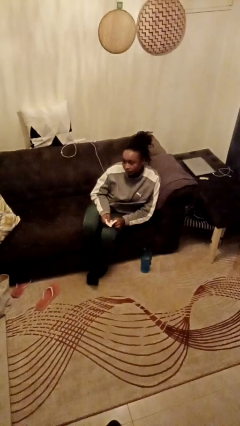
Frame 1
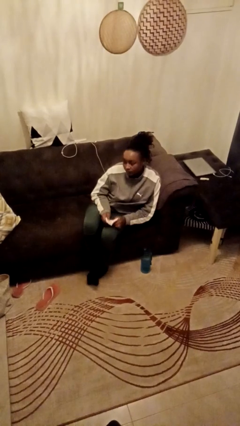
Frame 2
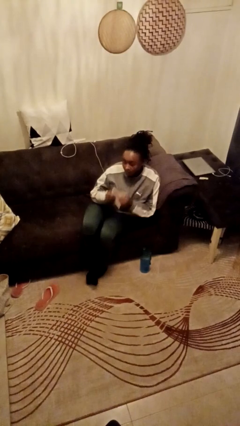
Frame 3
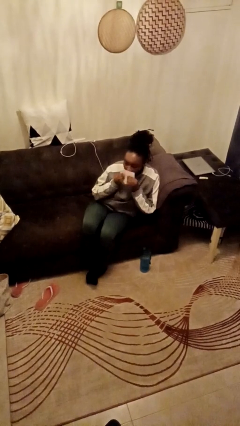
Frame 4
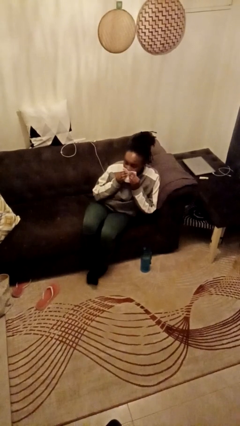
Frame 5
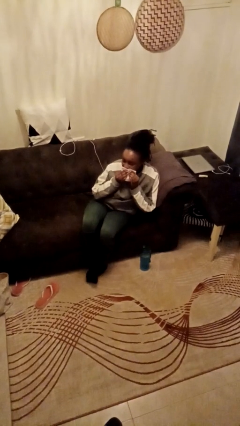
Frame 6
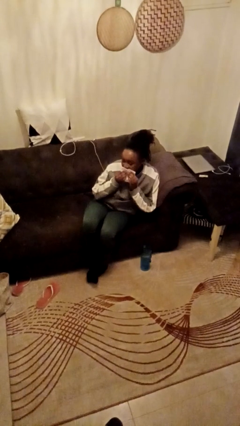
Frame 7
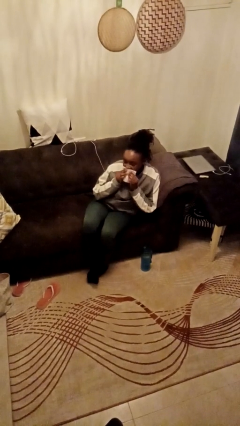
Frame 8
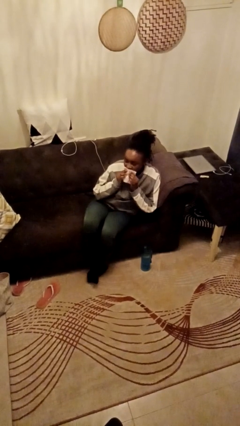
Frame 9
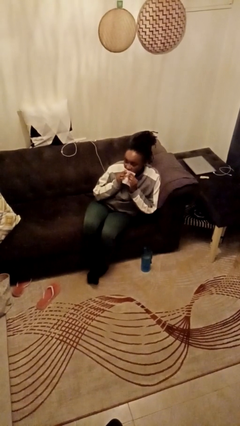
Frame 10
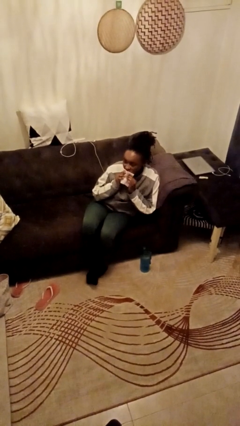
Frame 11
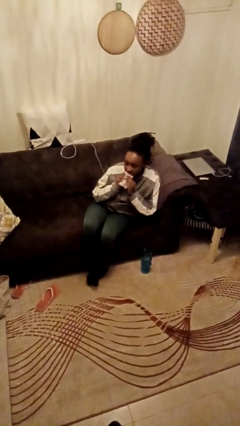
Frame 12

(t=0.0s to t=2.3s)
person wipes mouth with napkin

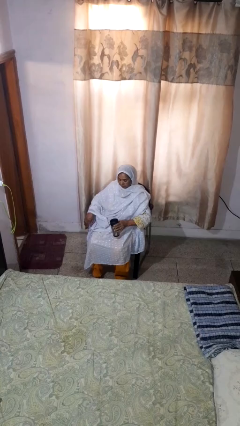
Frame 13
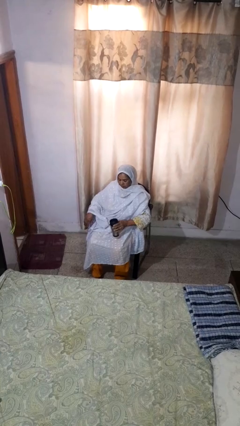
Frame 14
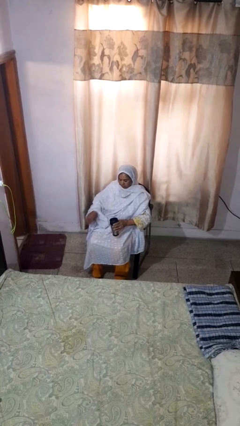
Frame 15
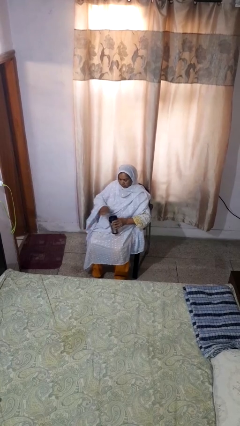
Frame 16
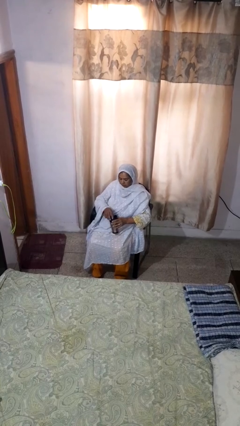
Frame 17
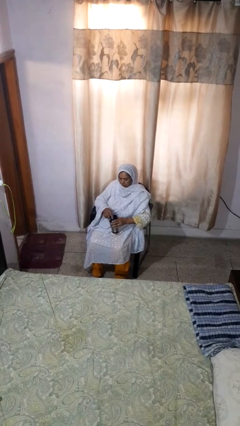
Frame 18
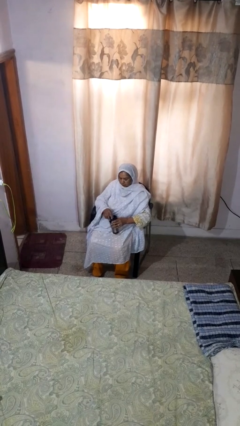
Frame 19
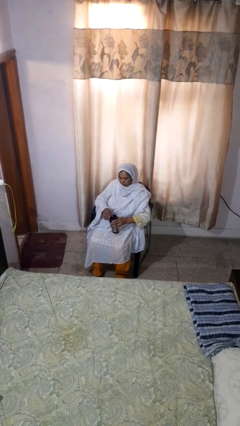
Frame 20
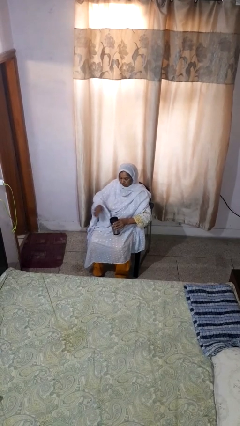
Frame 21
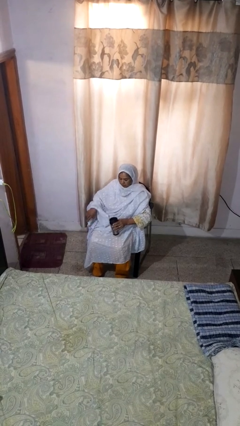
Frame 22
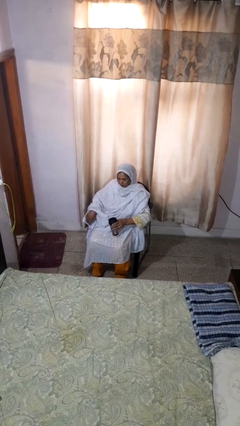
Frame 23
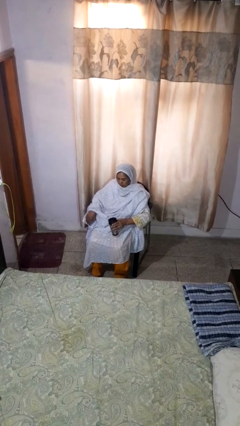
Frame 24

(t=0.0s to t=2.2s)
person opens beverage can

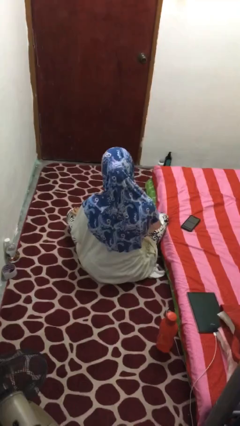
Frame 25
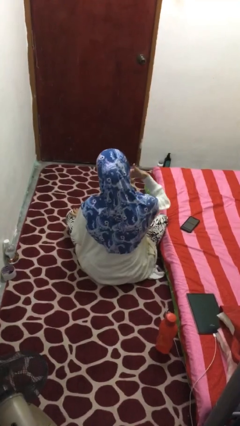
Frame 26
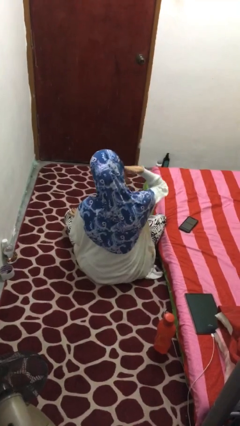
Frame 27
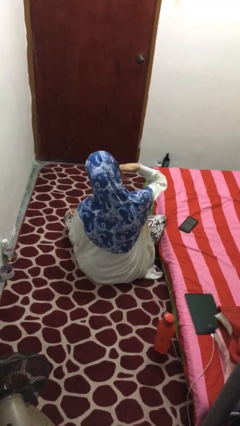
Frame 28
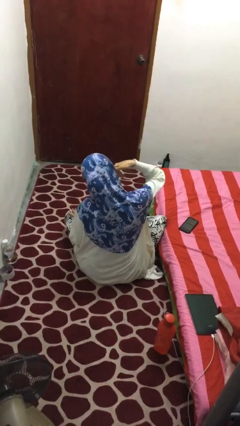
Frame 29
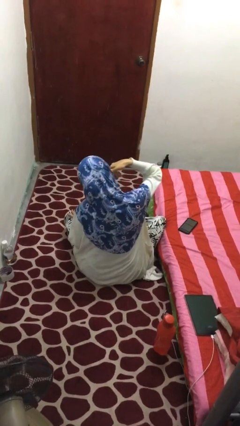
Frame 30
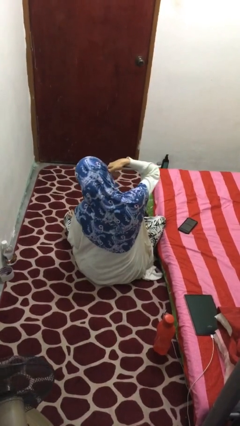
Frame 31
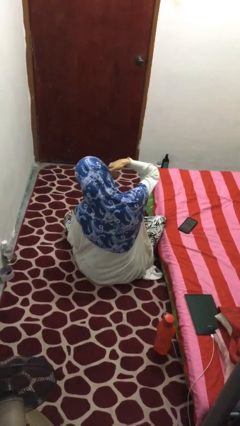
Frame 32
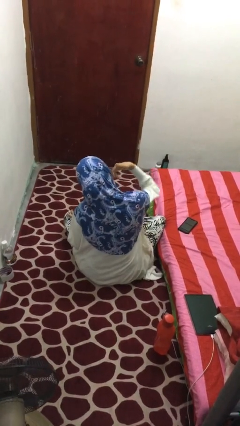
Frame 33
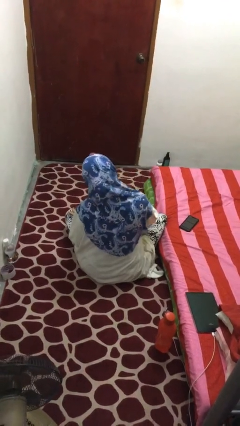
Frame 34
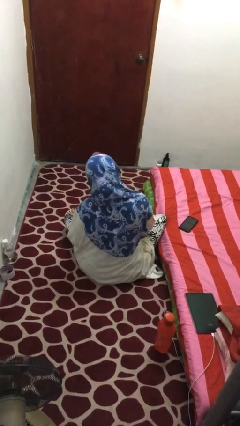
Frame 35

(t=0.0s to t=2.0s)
person gestures call me

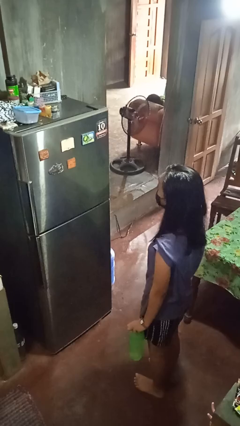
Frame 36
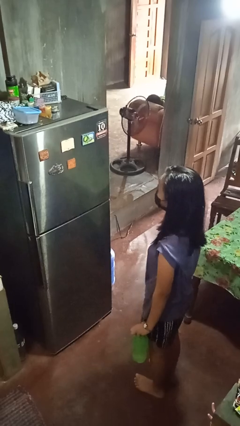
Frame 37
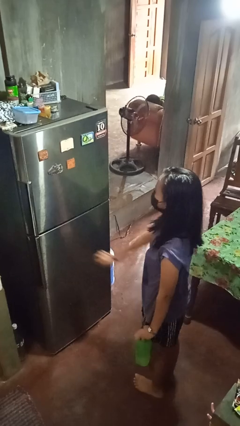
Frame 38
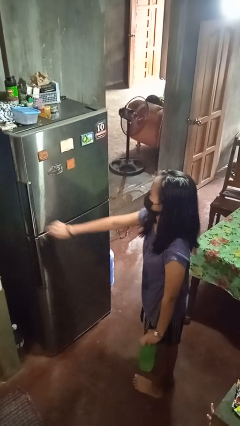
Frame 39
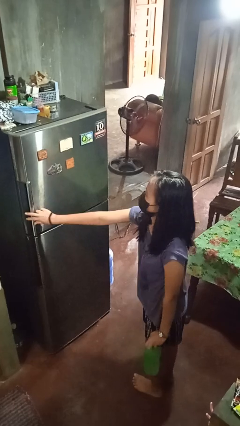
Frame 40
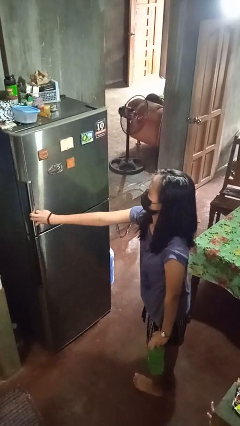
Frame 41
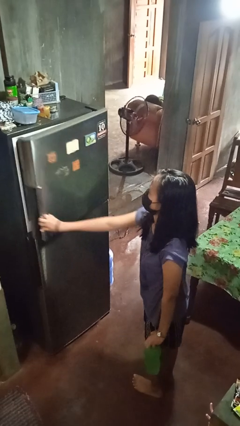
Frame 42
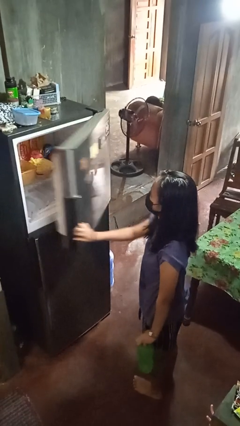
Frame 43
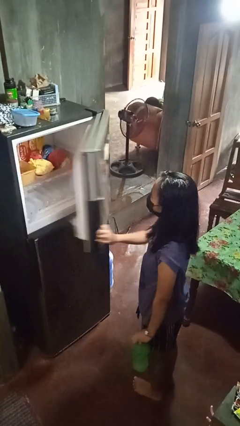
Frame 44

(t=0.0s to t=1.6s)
person opens refrigerator

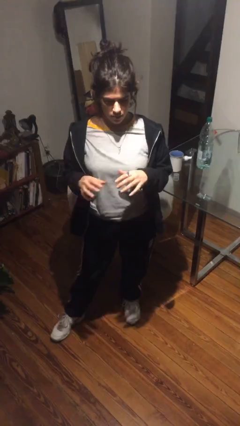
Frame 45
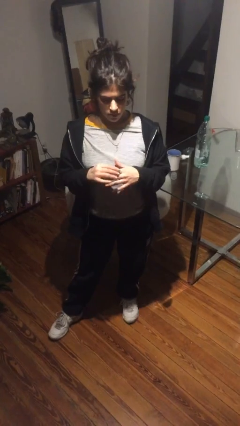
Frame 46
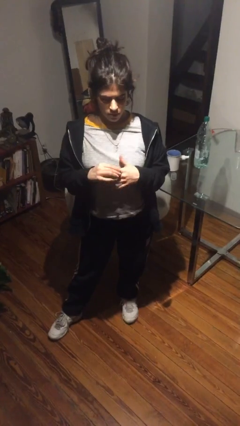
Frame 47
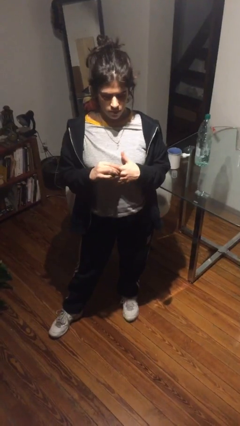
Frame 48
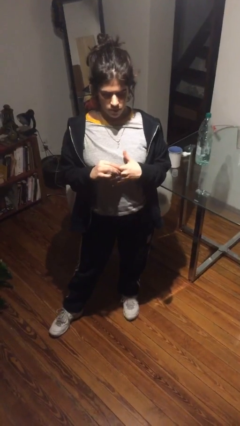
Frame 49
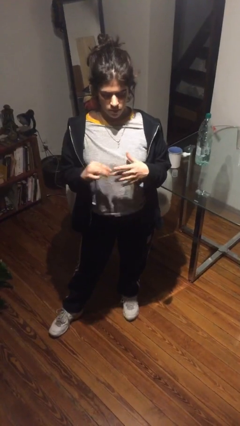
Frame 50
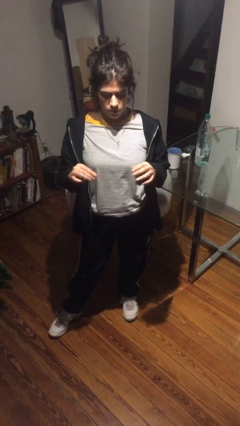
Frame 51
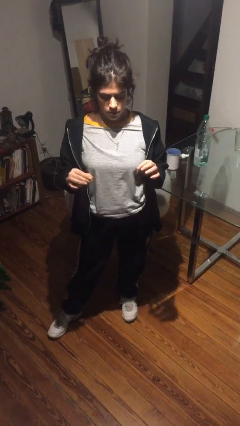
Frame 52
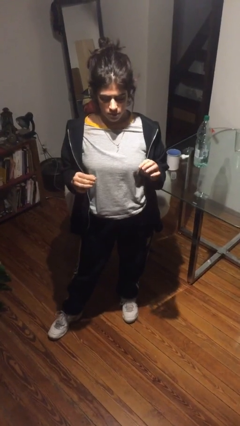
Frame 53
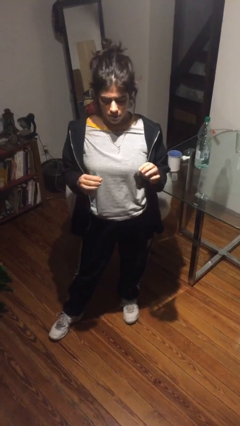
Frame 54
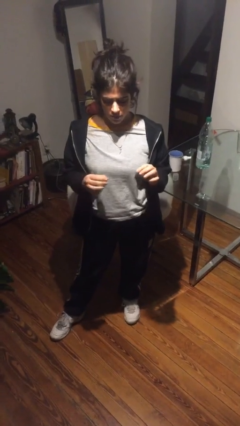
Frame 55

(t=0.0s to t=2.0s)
person takes off ring

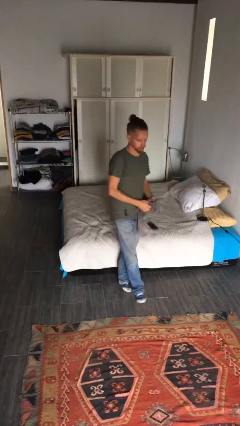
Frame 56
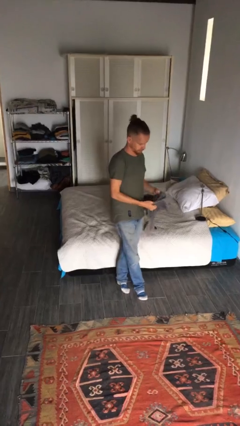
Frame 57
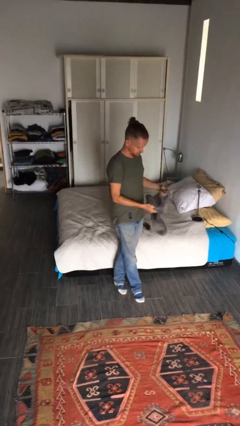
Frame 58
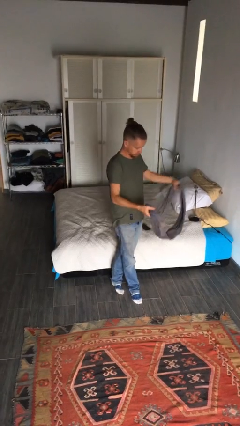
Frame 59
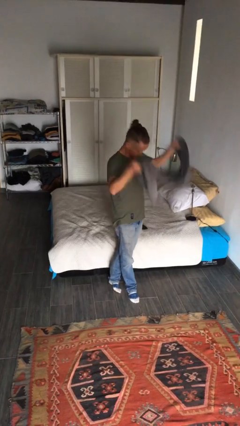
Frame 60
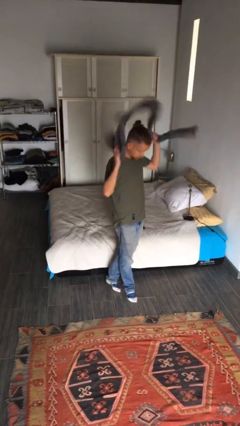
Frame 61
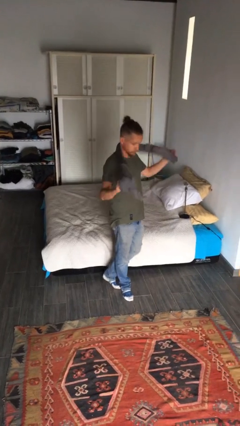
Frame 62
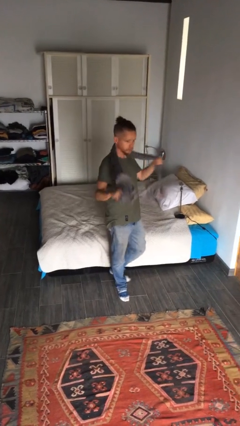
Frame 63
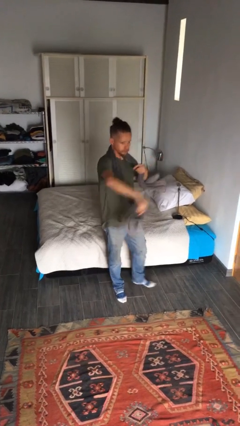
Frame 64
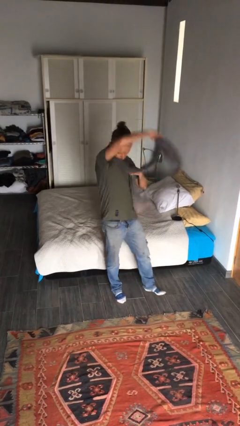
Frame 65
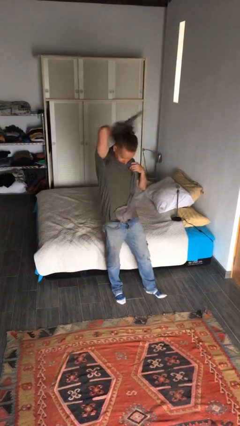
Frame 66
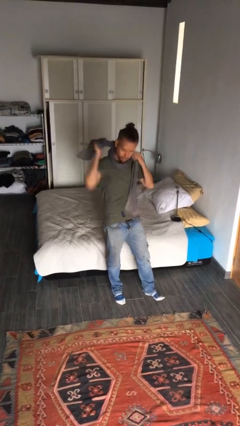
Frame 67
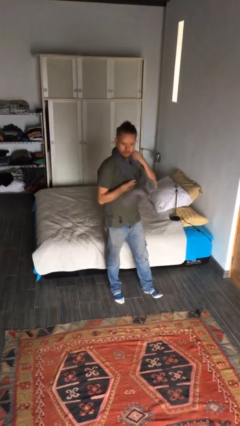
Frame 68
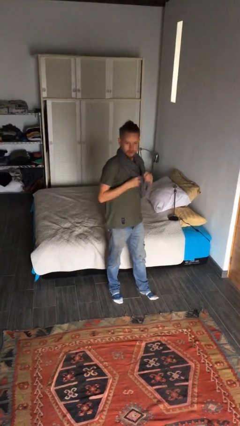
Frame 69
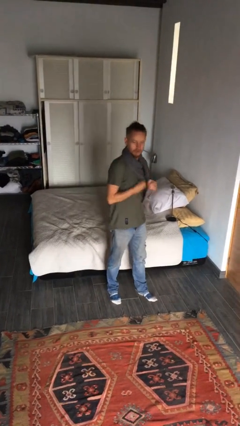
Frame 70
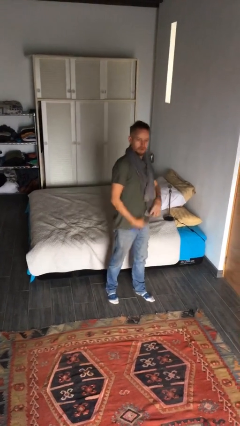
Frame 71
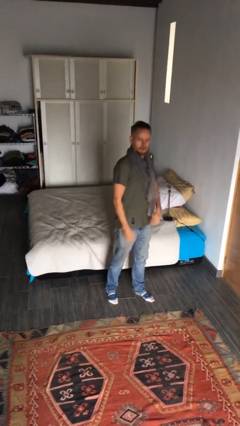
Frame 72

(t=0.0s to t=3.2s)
person puts on scarf

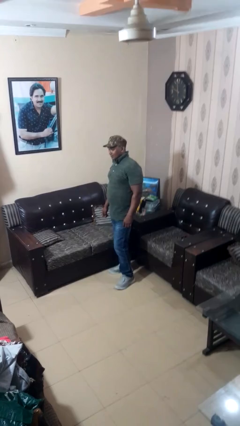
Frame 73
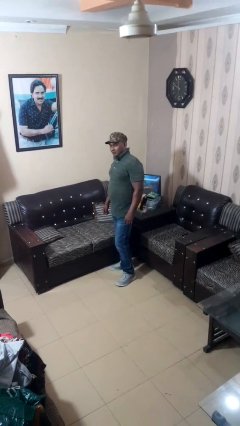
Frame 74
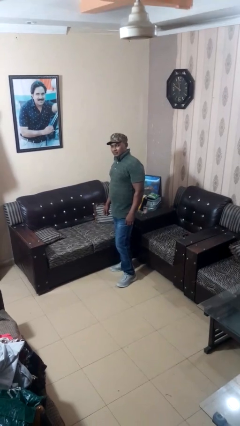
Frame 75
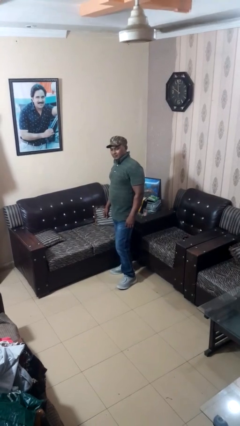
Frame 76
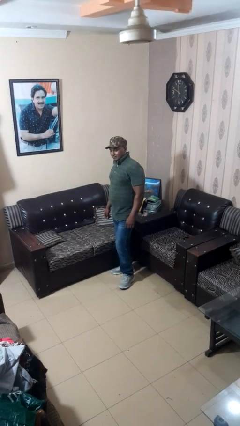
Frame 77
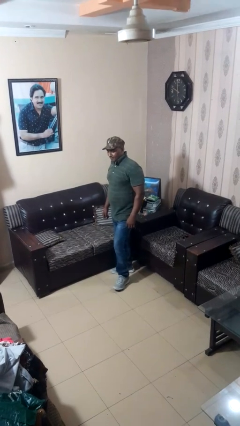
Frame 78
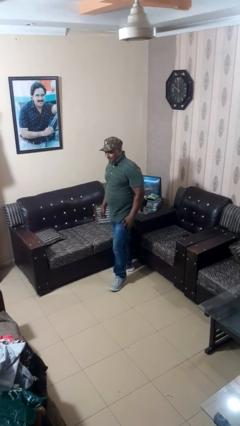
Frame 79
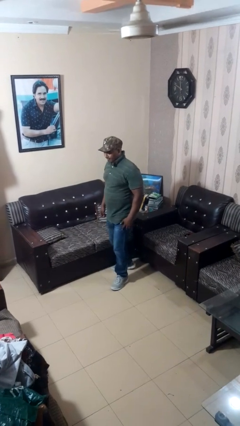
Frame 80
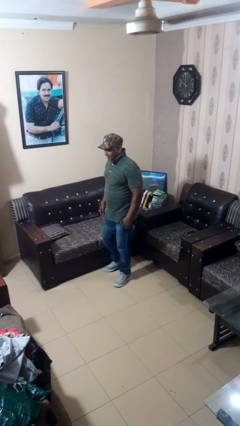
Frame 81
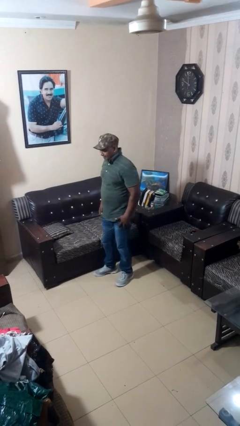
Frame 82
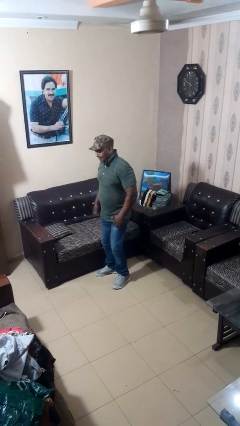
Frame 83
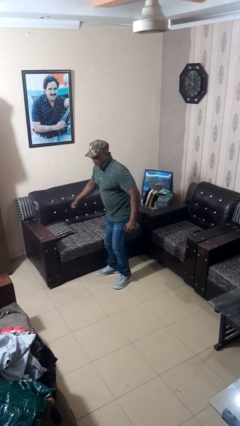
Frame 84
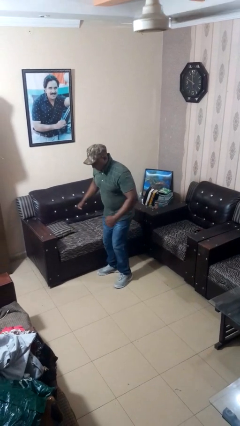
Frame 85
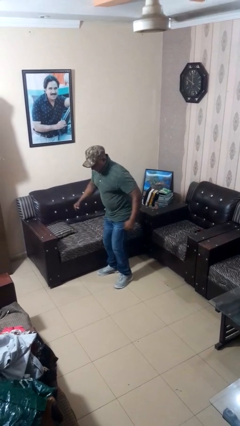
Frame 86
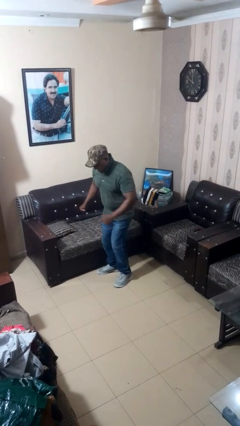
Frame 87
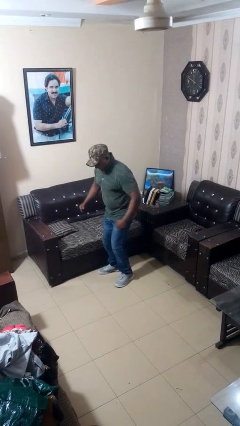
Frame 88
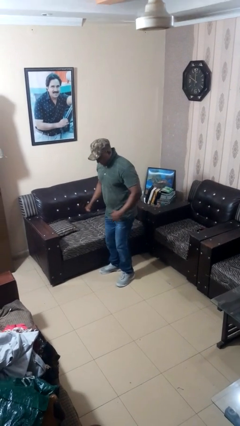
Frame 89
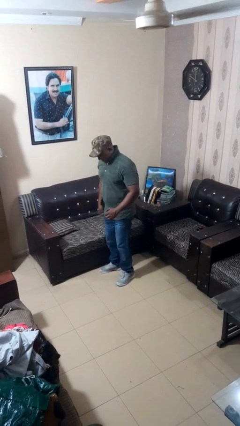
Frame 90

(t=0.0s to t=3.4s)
person wiggles hips

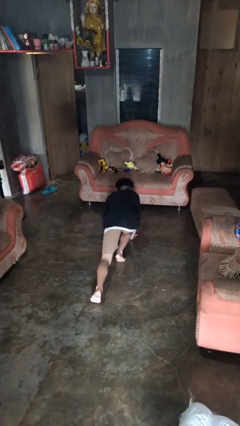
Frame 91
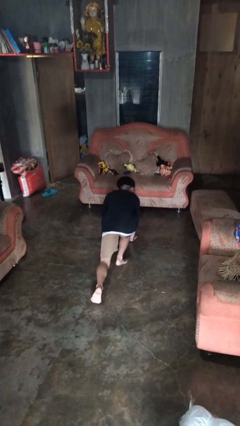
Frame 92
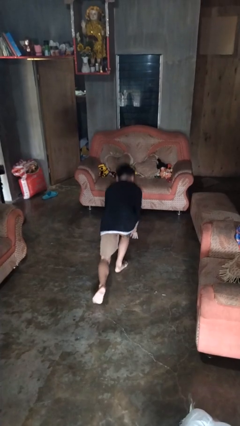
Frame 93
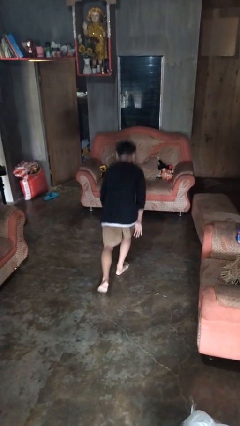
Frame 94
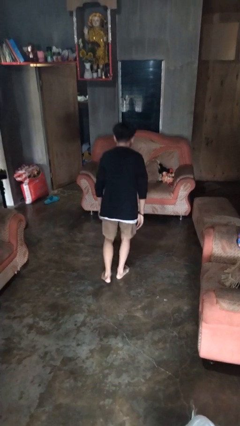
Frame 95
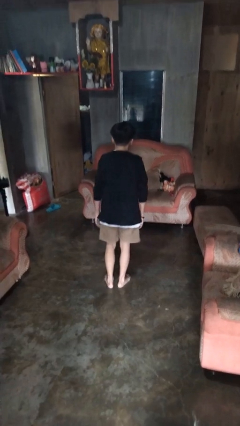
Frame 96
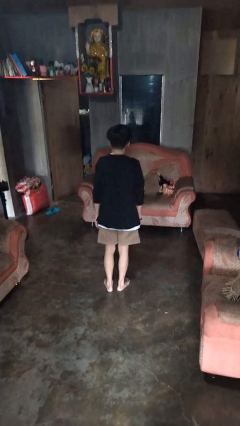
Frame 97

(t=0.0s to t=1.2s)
person stands up from floor
